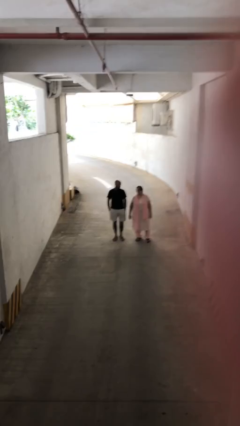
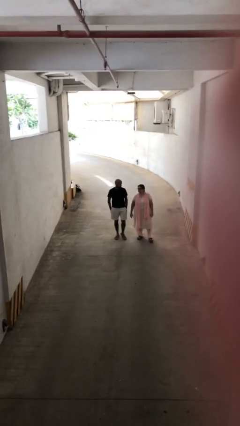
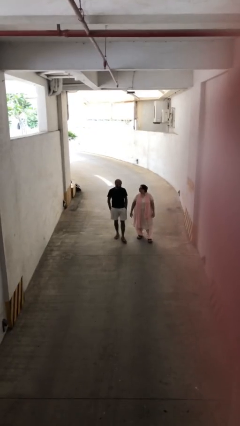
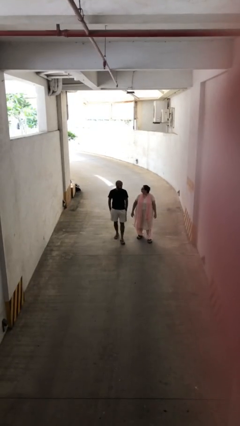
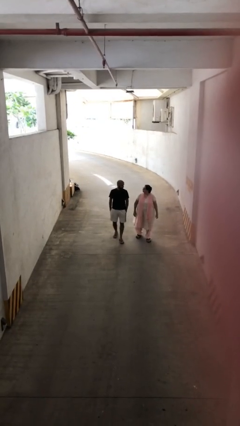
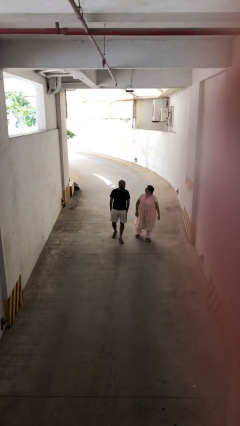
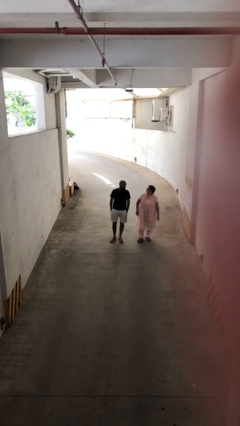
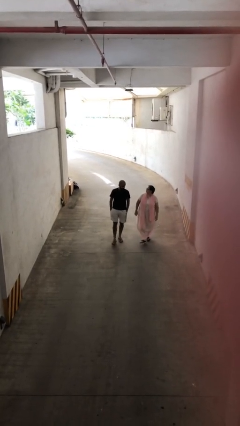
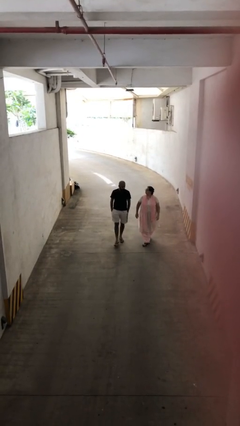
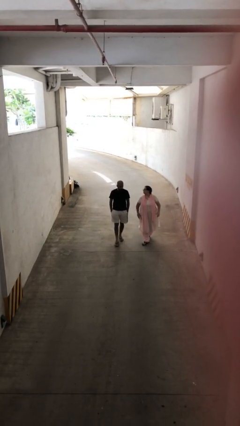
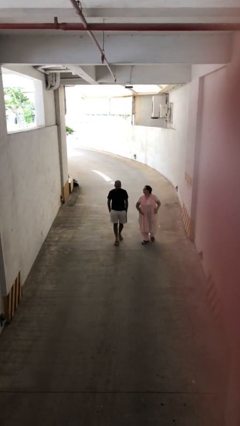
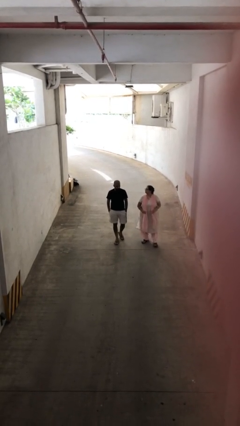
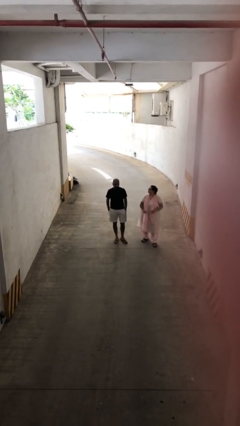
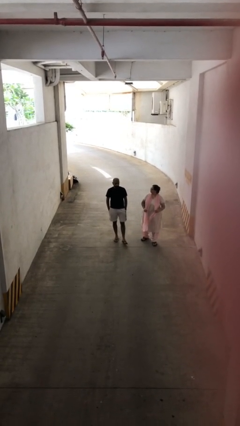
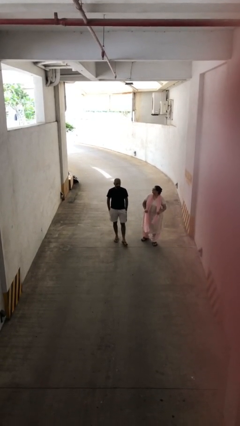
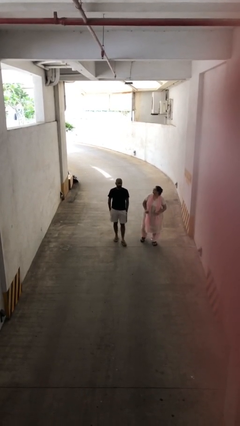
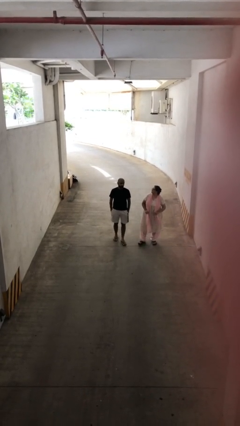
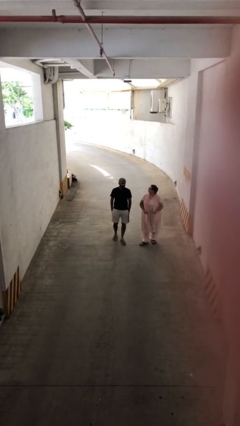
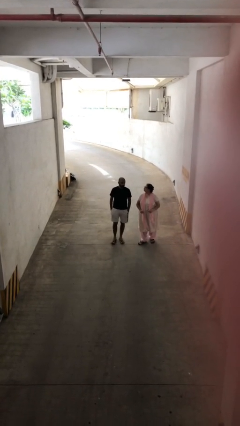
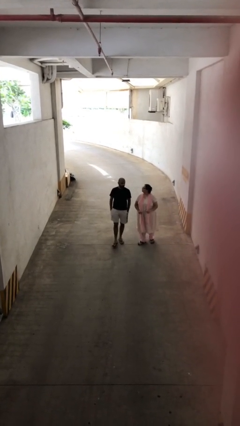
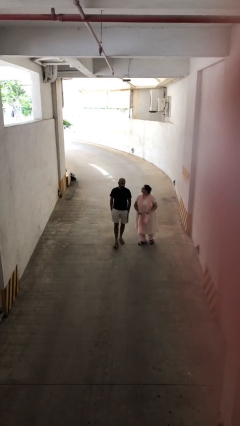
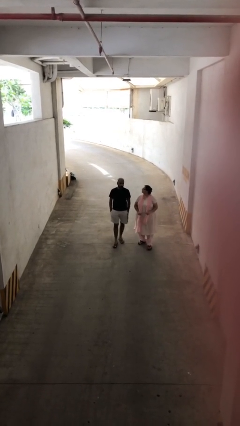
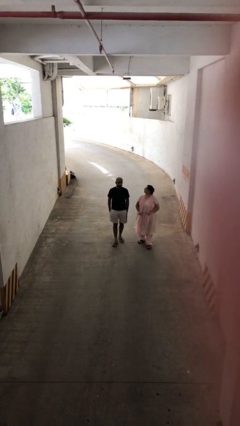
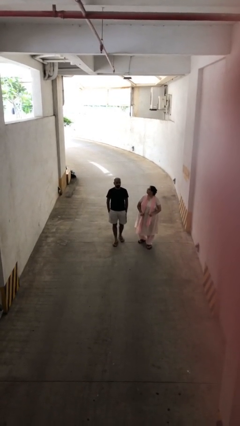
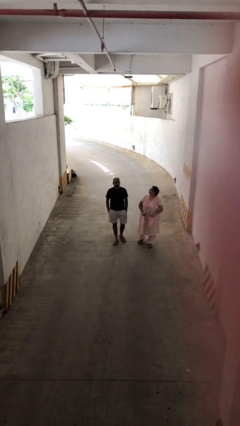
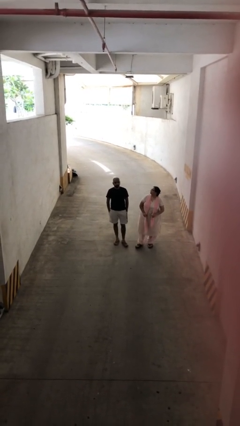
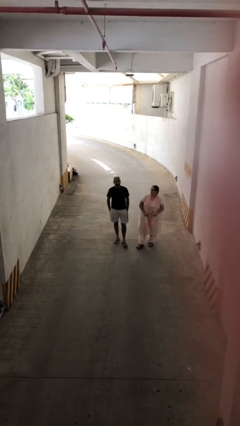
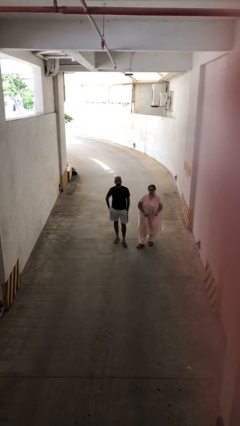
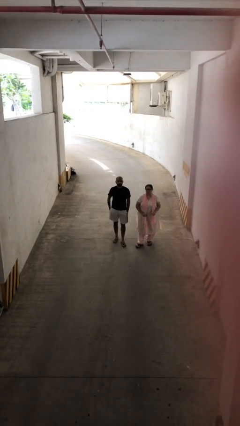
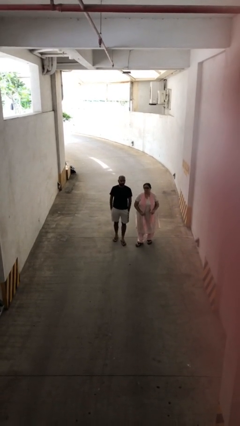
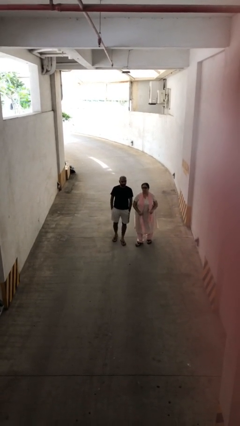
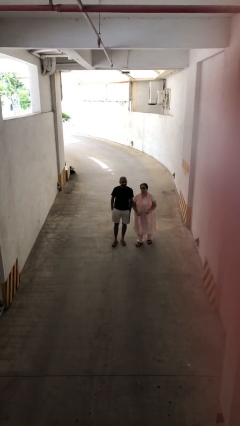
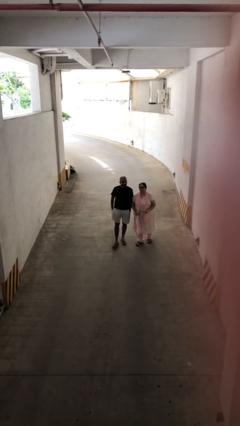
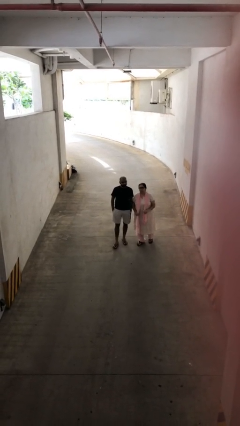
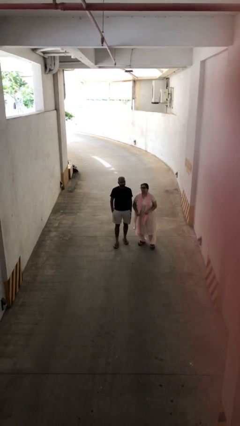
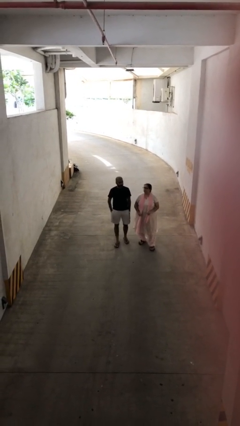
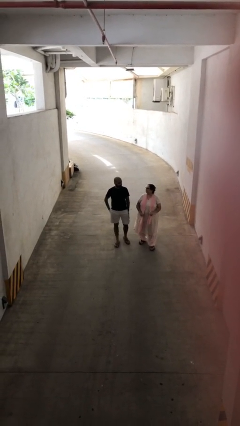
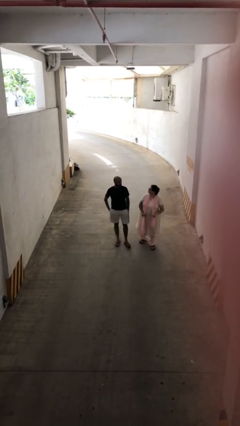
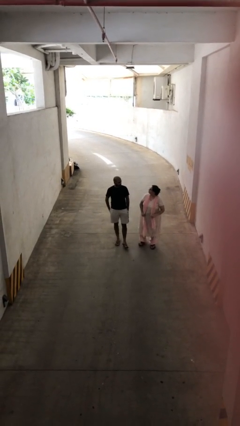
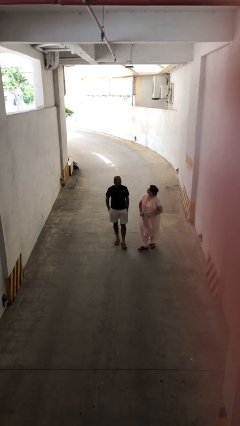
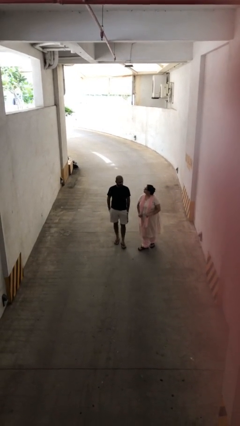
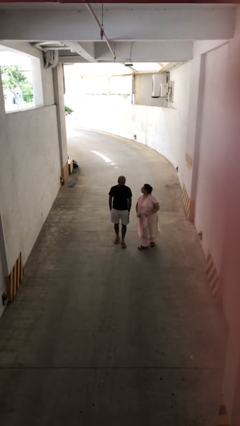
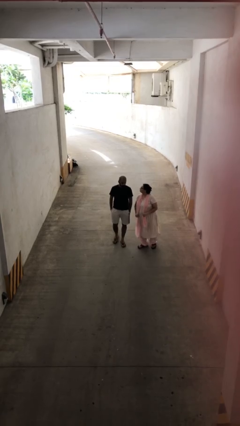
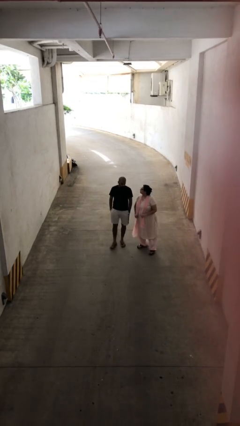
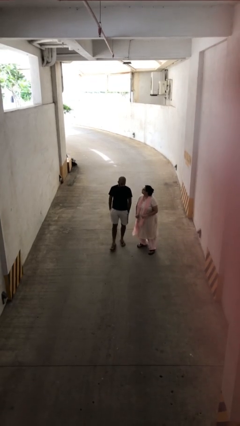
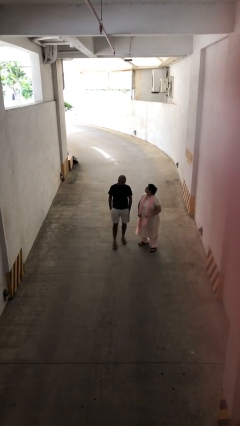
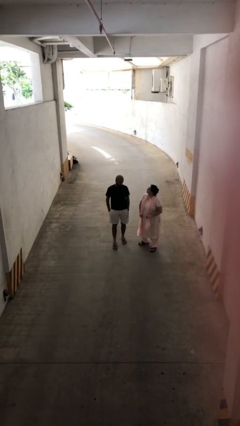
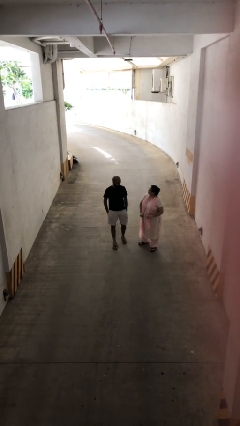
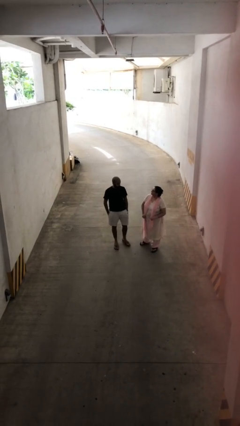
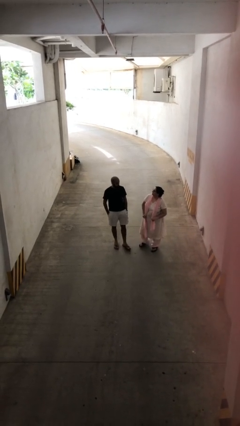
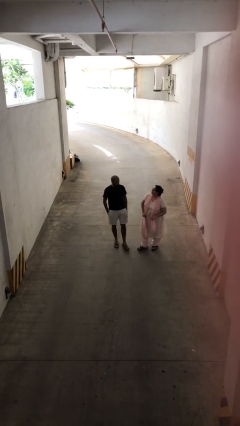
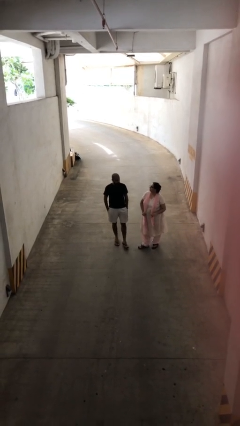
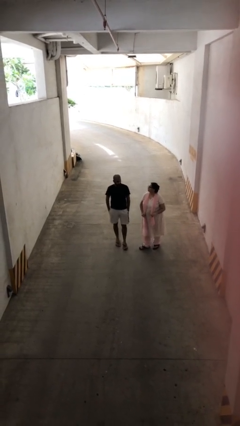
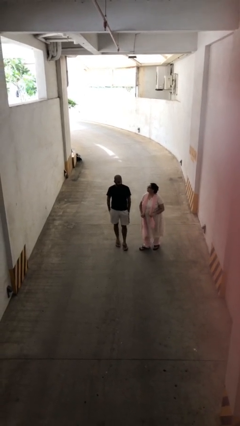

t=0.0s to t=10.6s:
person talks to person

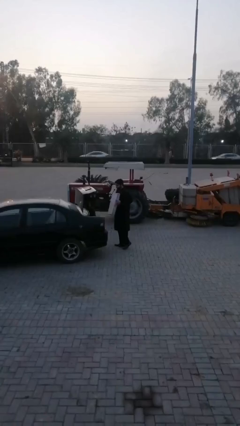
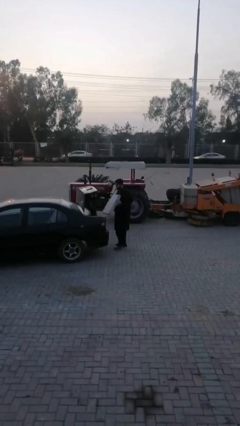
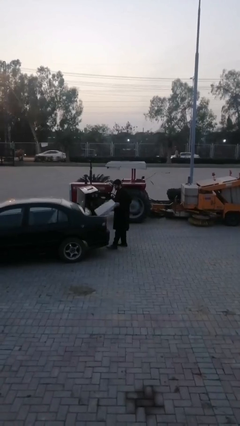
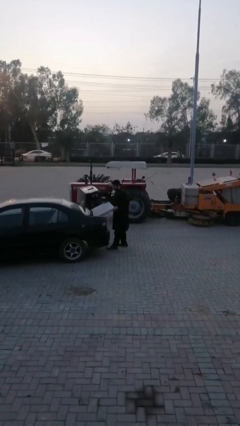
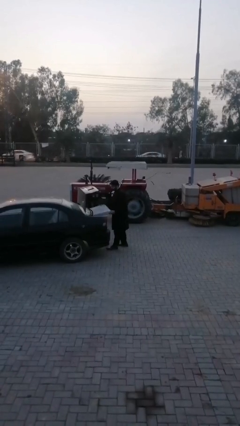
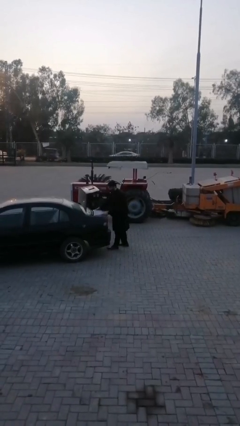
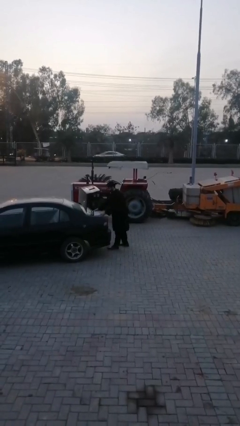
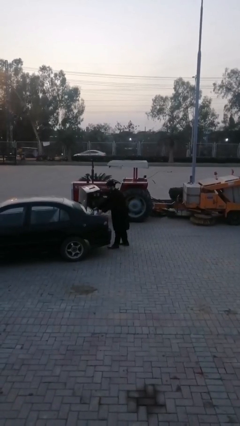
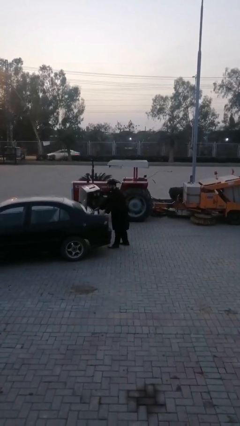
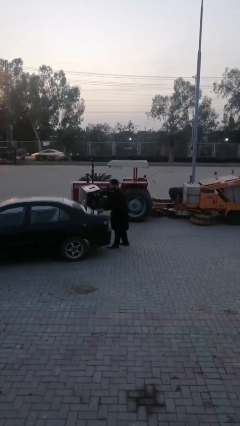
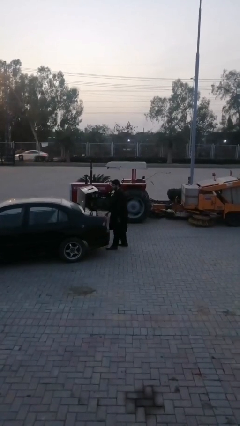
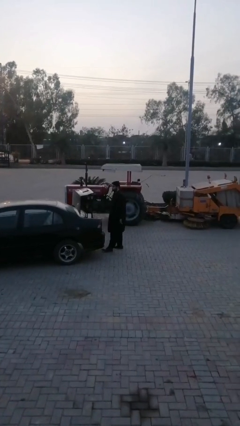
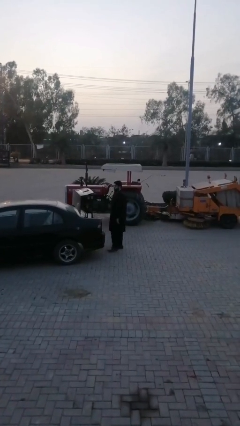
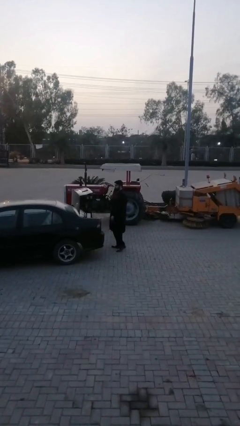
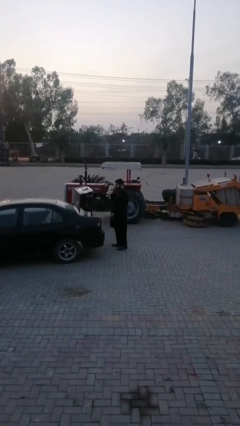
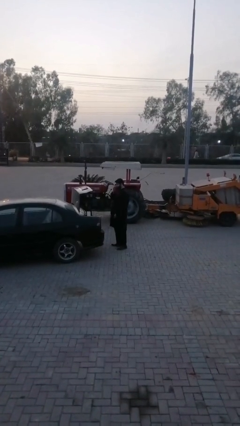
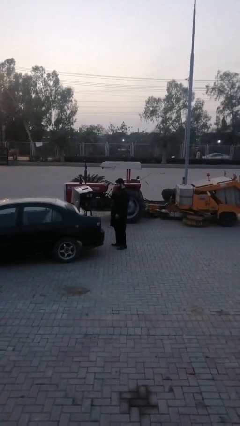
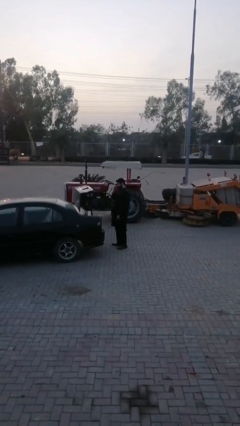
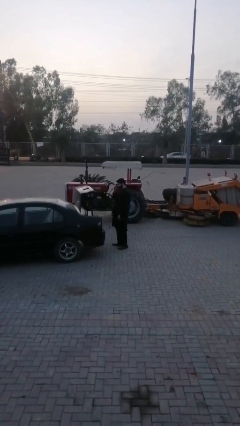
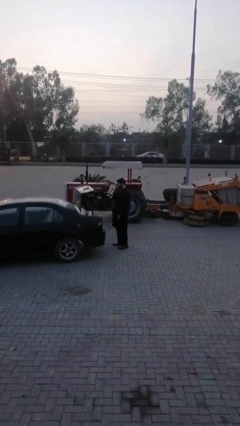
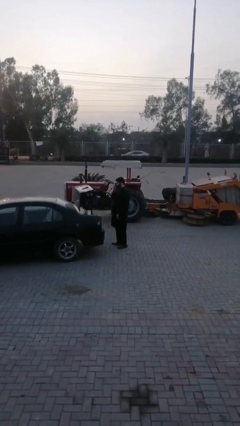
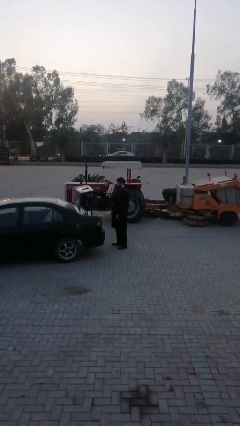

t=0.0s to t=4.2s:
person loads car

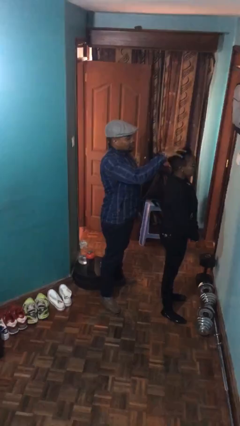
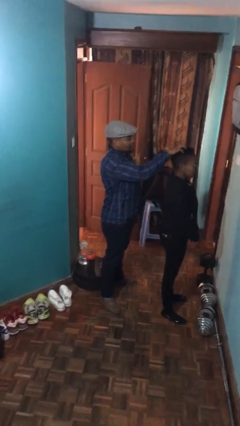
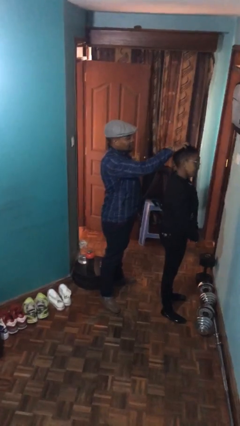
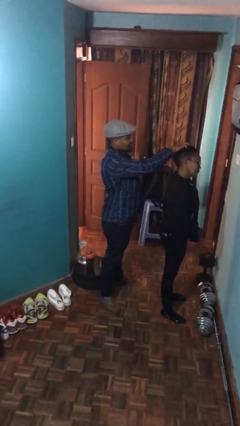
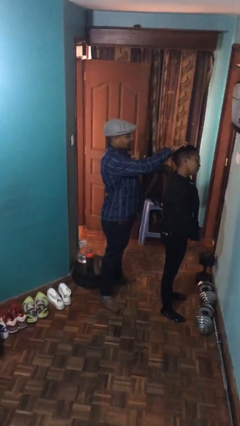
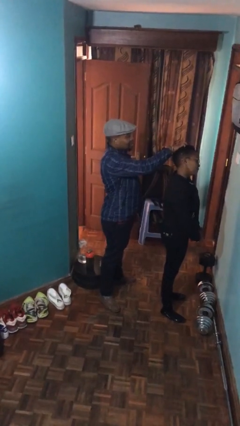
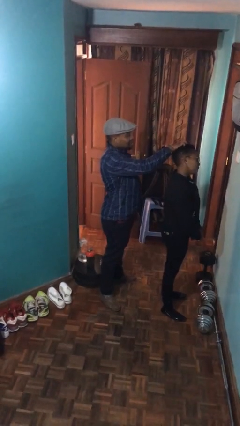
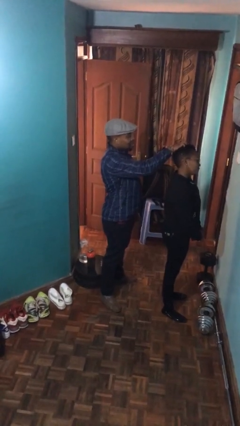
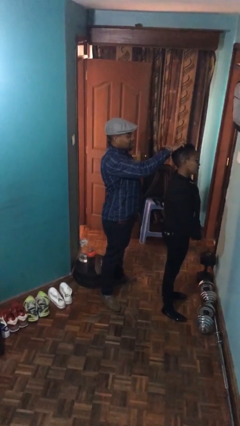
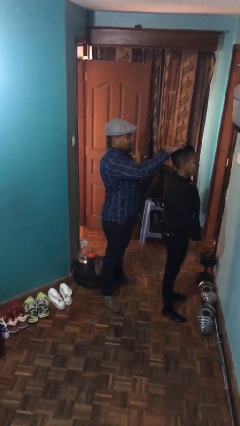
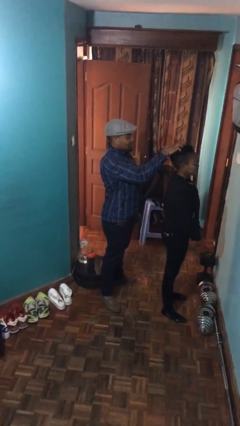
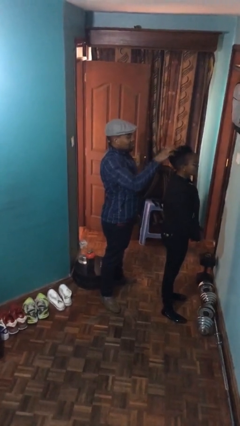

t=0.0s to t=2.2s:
person grabs person by hair

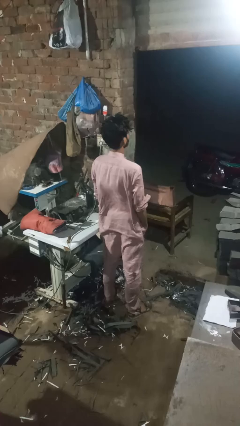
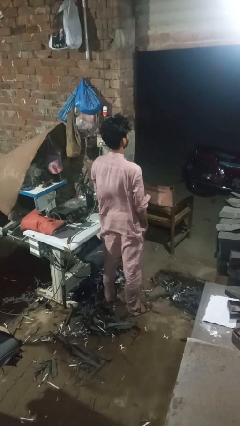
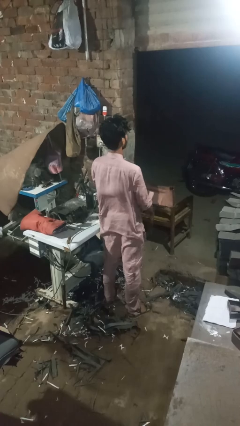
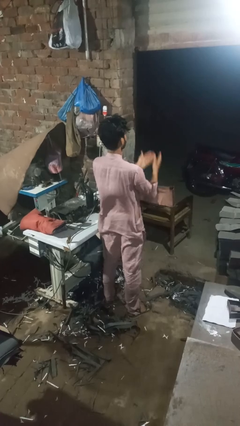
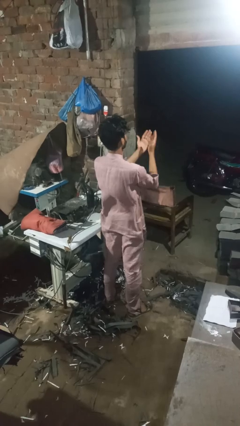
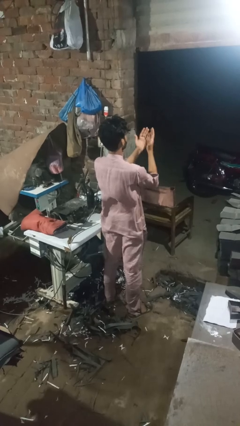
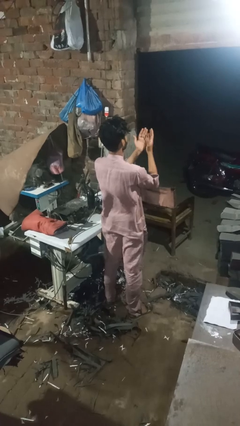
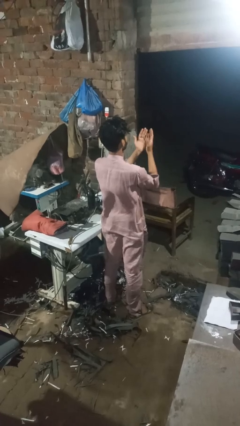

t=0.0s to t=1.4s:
person prays
